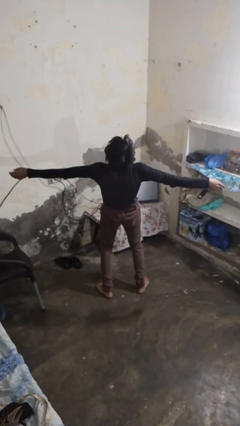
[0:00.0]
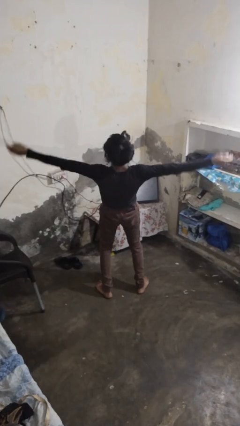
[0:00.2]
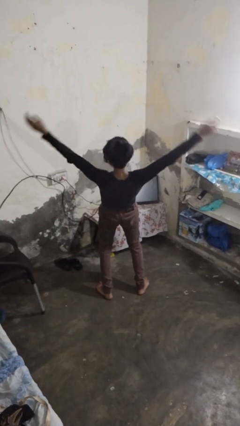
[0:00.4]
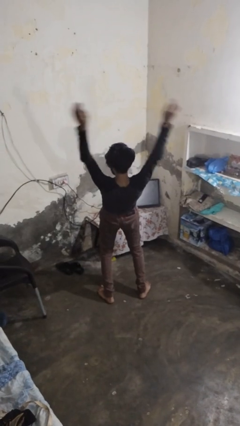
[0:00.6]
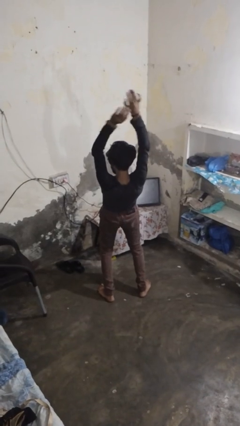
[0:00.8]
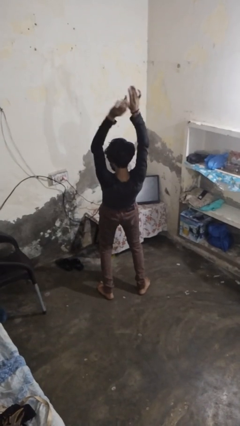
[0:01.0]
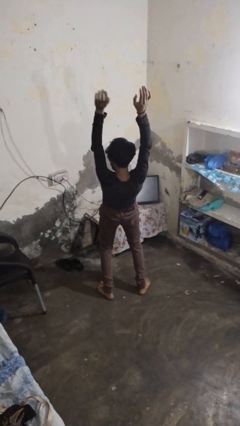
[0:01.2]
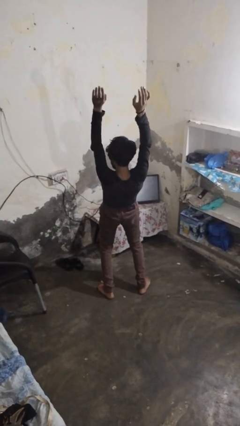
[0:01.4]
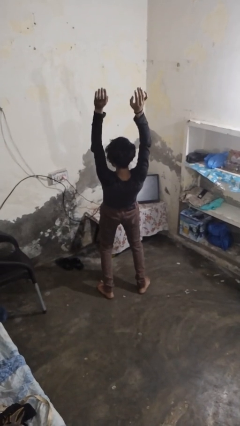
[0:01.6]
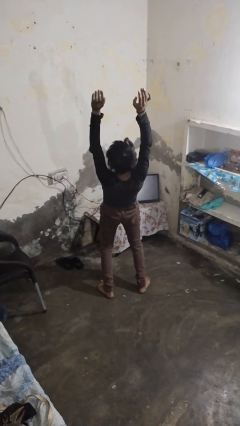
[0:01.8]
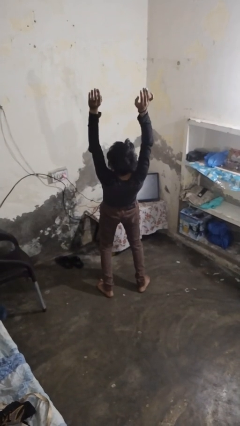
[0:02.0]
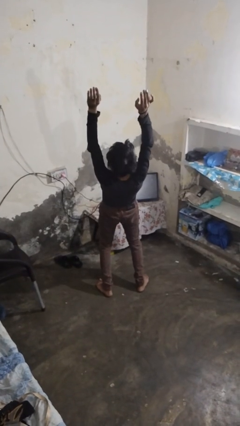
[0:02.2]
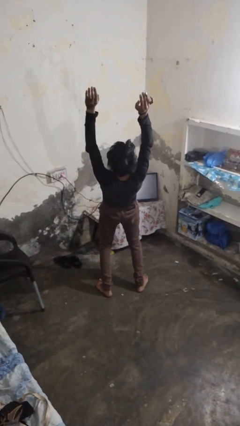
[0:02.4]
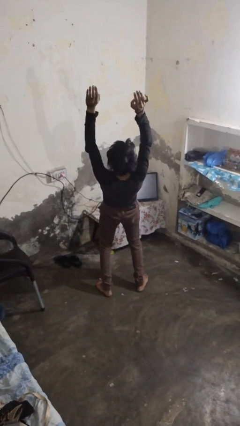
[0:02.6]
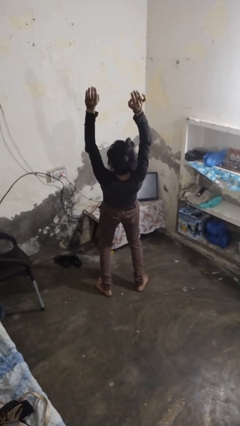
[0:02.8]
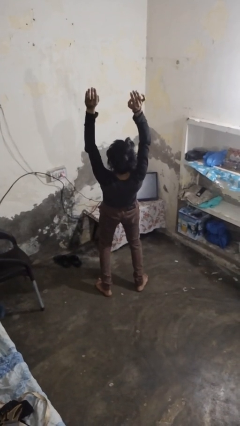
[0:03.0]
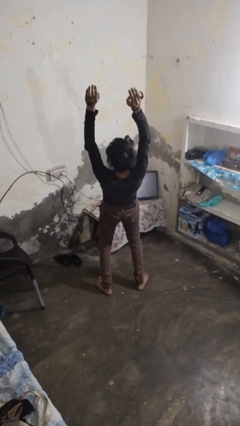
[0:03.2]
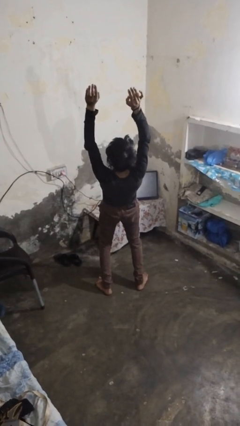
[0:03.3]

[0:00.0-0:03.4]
person stretches arms over head

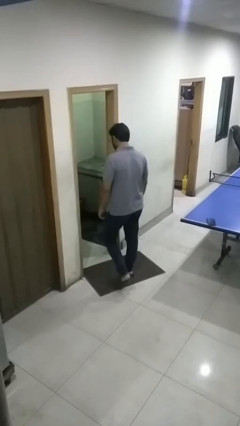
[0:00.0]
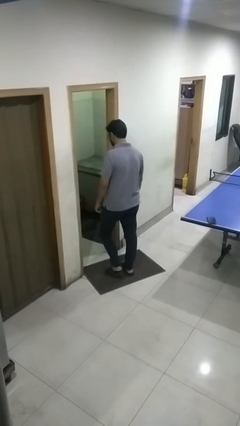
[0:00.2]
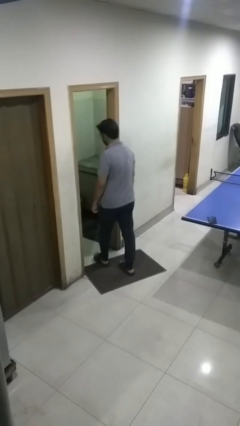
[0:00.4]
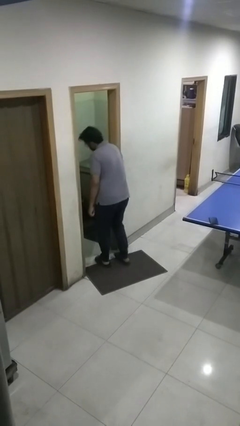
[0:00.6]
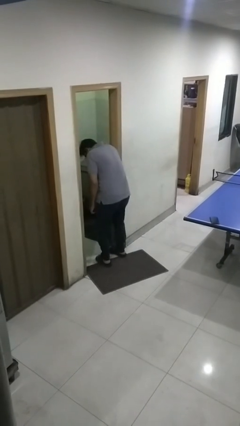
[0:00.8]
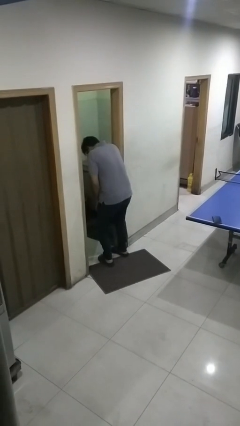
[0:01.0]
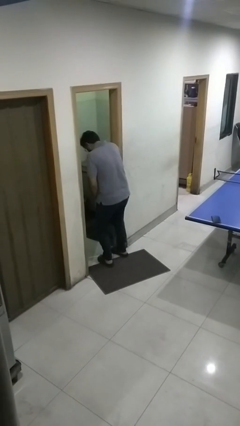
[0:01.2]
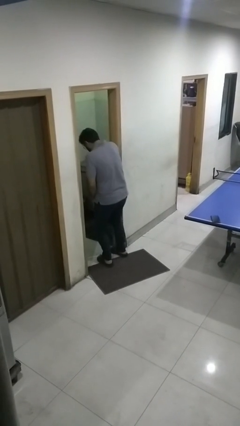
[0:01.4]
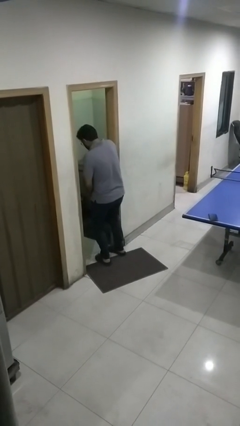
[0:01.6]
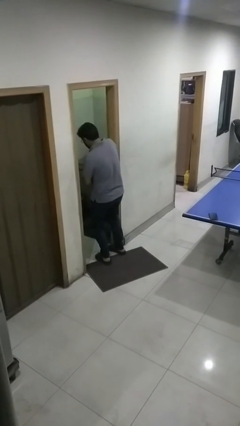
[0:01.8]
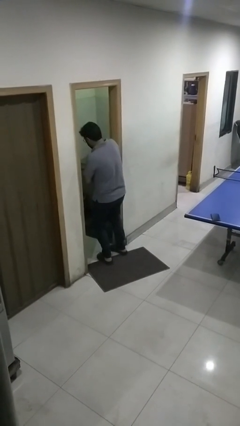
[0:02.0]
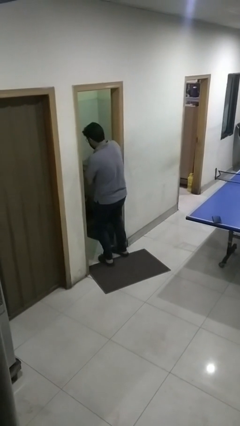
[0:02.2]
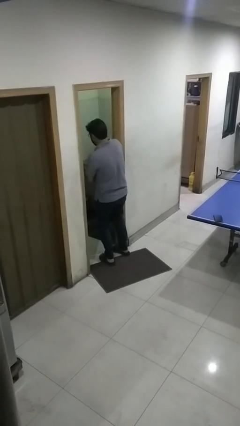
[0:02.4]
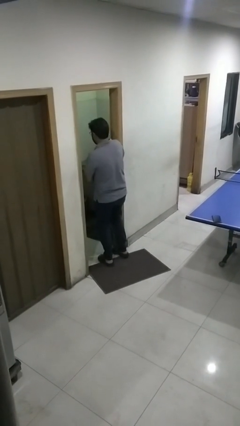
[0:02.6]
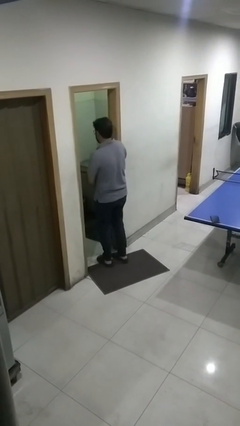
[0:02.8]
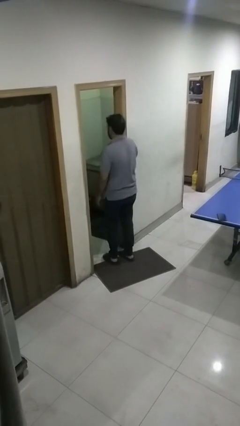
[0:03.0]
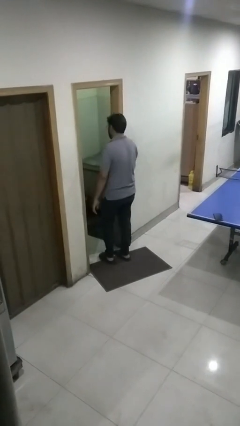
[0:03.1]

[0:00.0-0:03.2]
person bumps into wall

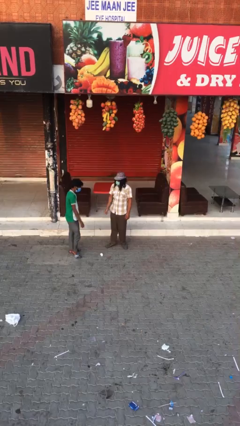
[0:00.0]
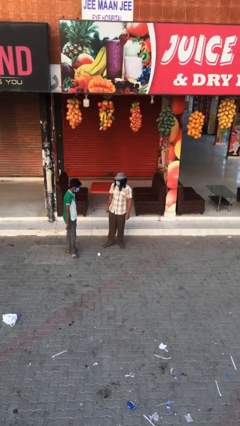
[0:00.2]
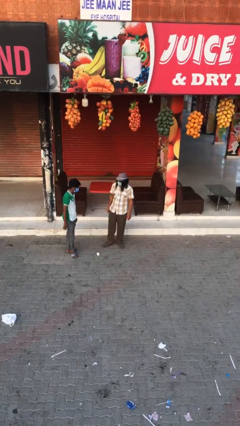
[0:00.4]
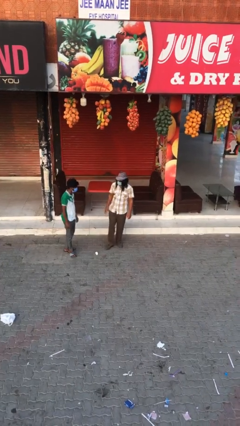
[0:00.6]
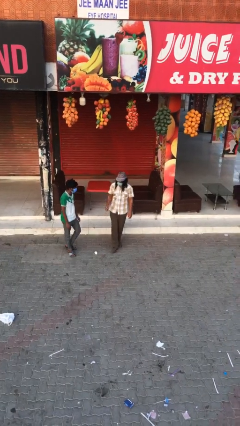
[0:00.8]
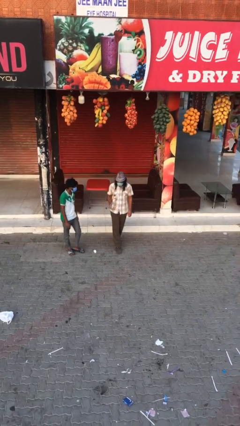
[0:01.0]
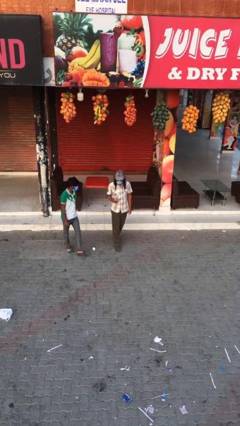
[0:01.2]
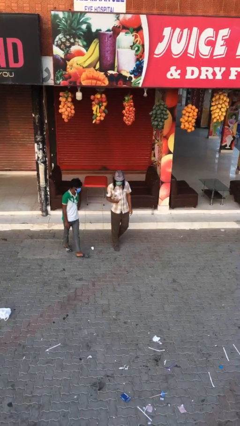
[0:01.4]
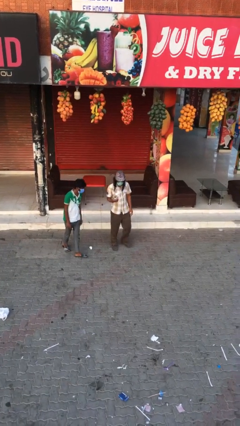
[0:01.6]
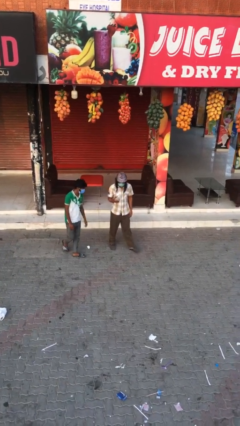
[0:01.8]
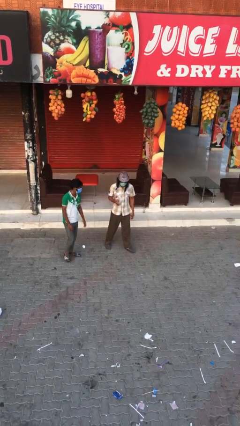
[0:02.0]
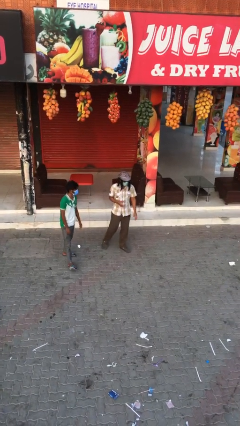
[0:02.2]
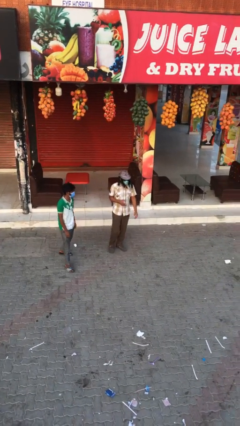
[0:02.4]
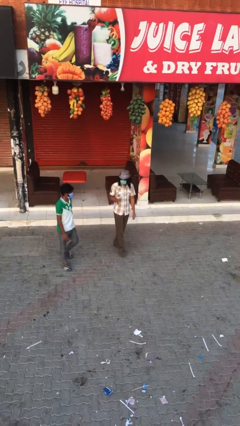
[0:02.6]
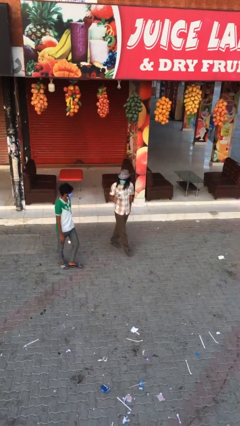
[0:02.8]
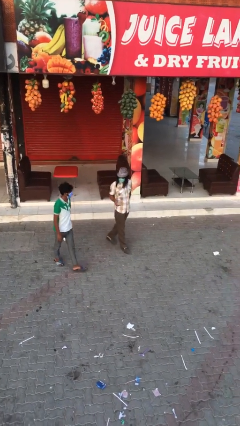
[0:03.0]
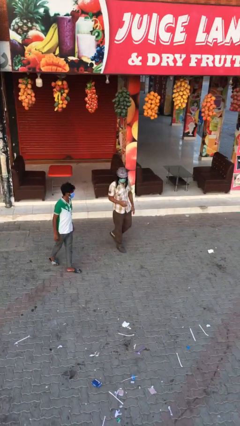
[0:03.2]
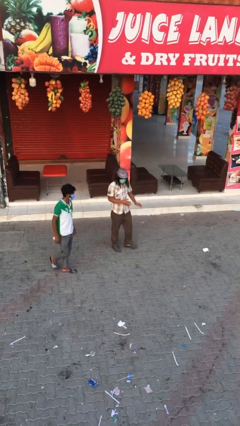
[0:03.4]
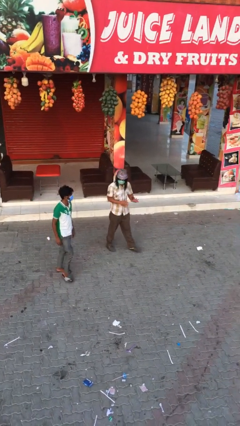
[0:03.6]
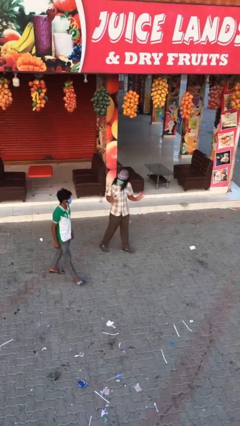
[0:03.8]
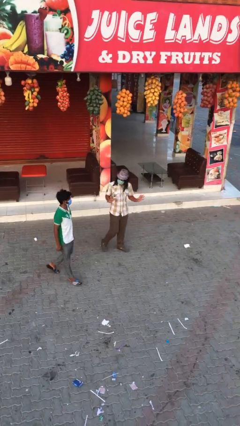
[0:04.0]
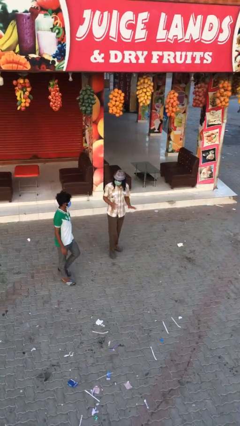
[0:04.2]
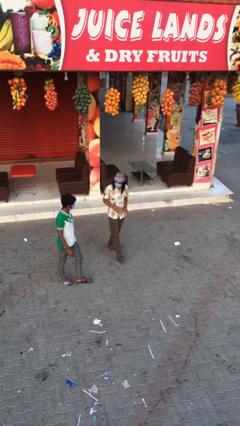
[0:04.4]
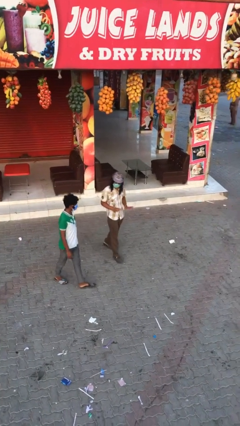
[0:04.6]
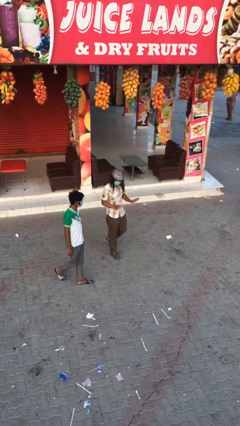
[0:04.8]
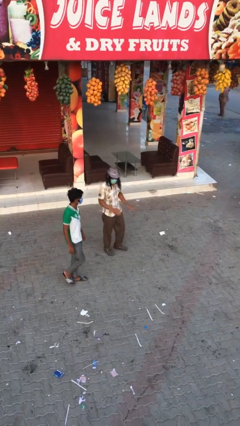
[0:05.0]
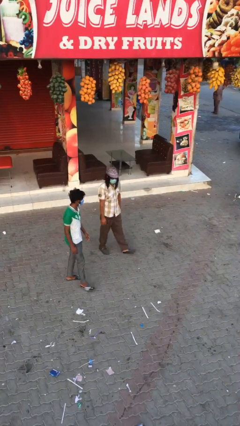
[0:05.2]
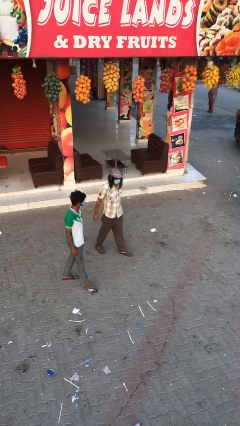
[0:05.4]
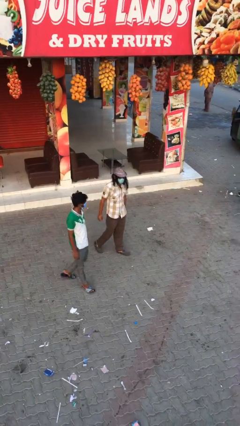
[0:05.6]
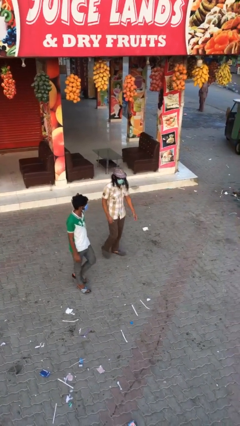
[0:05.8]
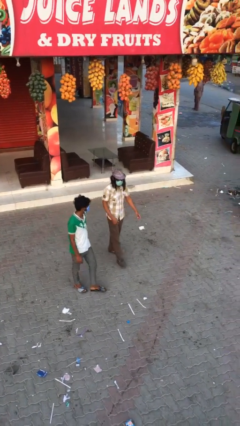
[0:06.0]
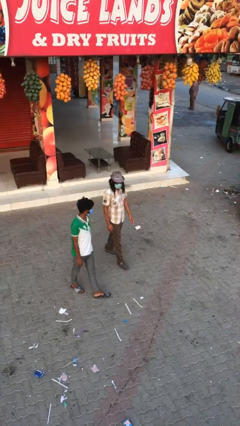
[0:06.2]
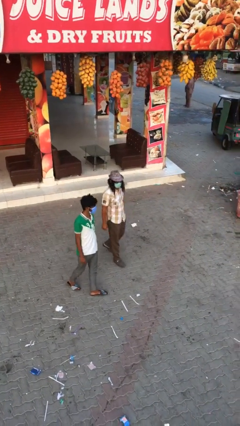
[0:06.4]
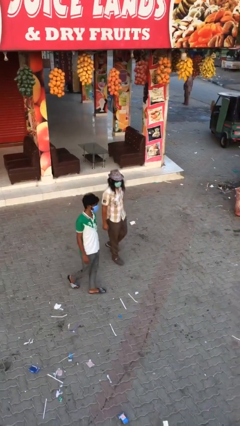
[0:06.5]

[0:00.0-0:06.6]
person talks to person

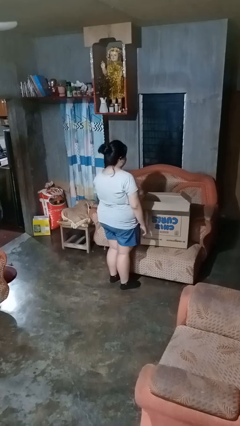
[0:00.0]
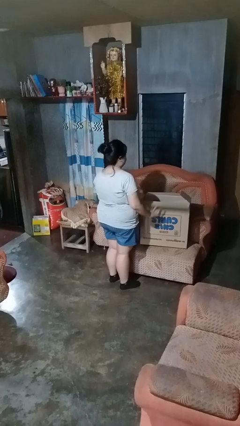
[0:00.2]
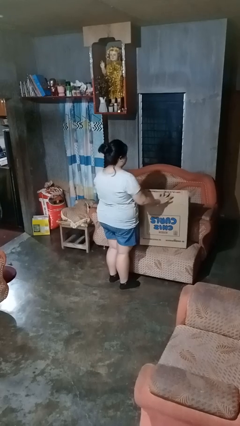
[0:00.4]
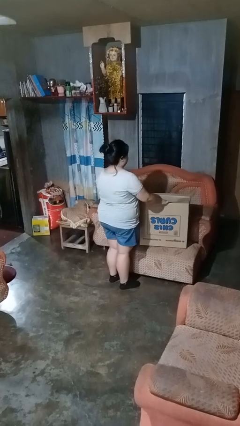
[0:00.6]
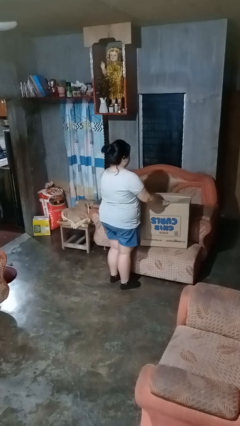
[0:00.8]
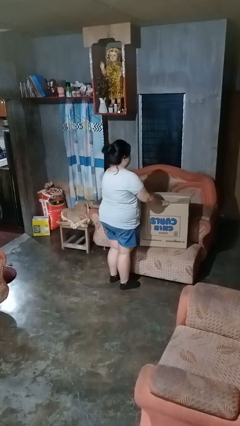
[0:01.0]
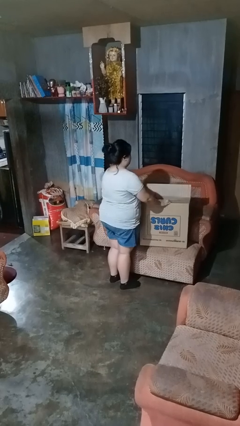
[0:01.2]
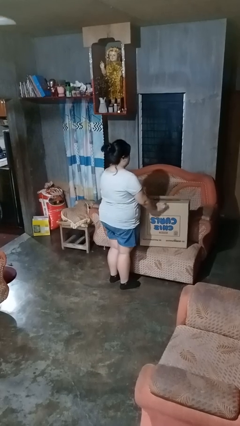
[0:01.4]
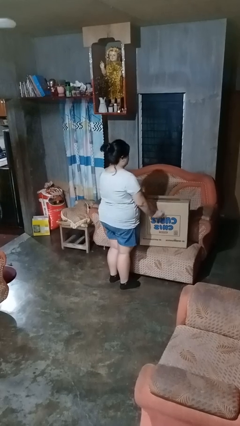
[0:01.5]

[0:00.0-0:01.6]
person closes box

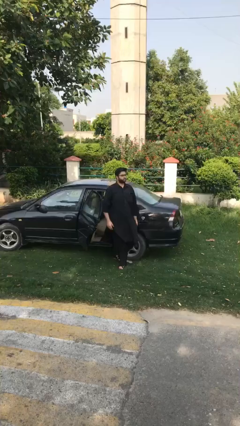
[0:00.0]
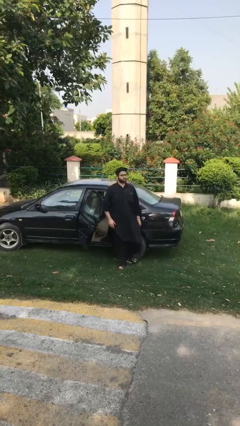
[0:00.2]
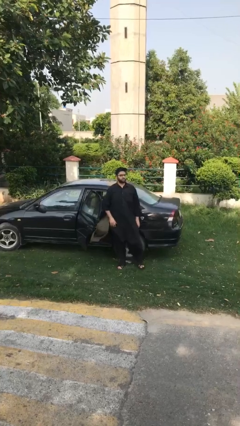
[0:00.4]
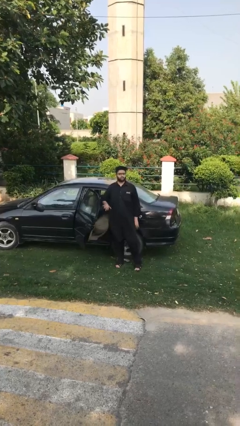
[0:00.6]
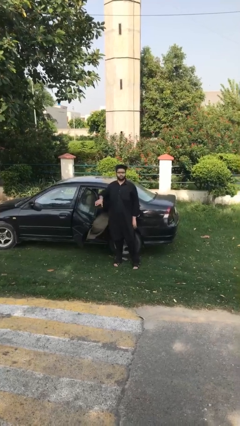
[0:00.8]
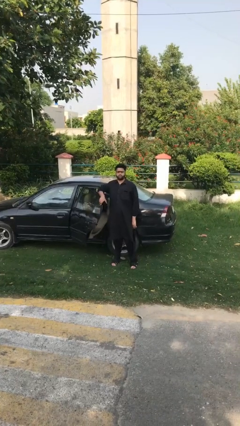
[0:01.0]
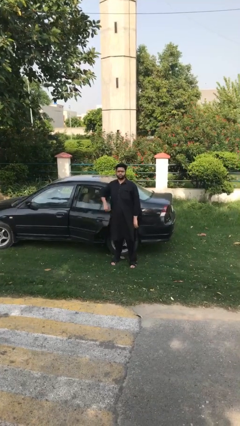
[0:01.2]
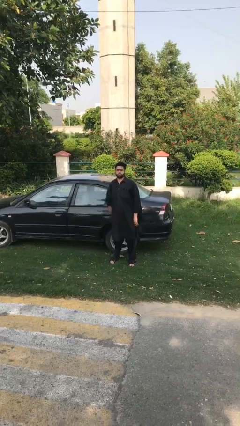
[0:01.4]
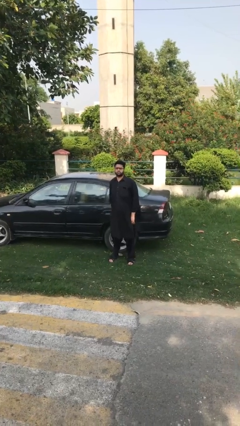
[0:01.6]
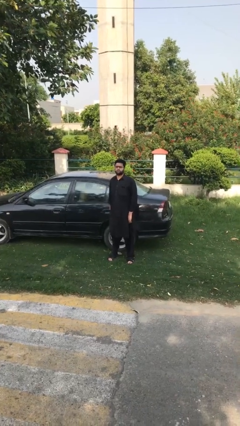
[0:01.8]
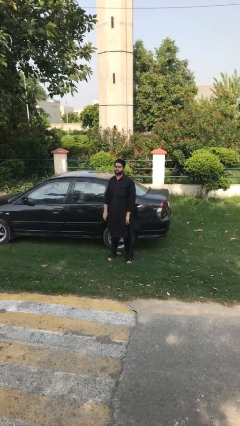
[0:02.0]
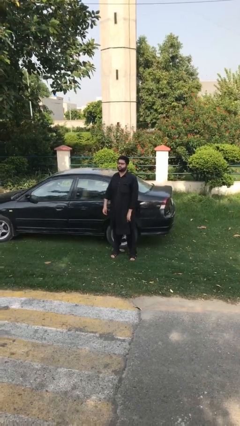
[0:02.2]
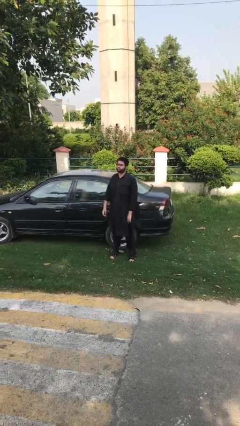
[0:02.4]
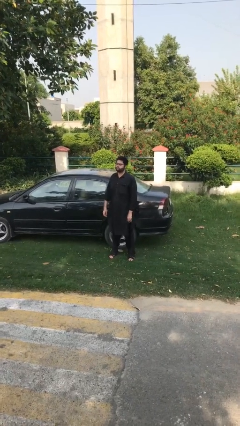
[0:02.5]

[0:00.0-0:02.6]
person closes car door
